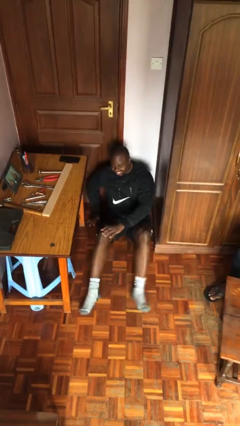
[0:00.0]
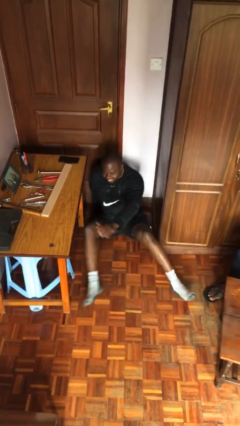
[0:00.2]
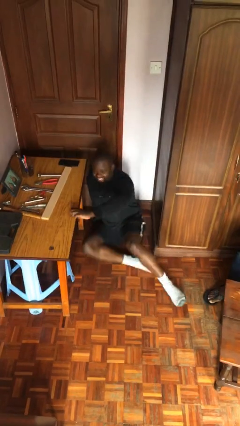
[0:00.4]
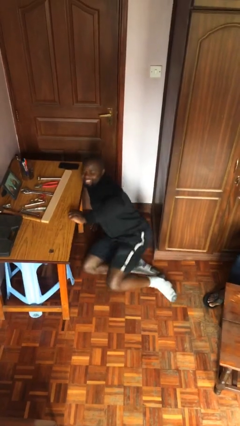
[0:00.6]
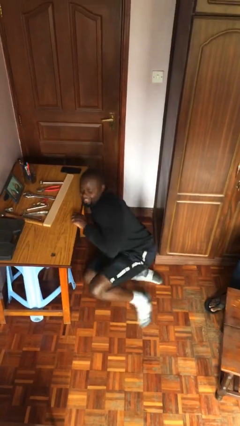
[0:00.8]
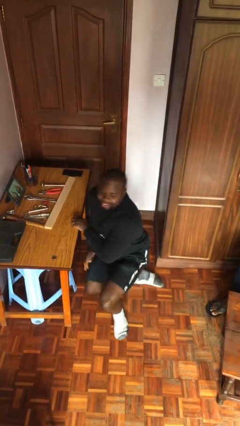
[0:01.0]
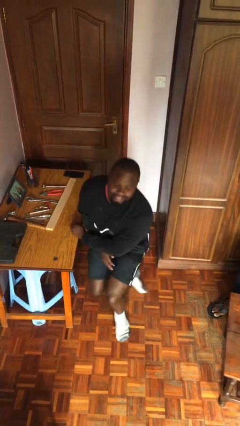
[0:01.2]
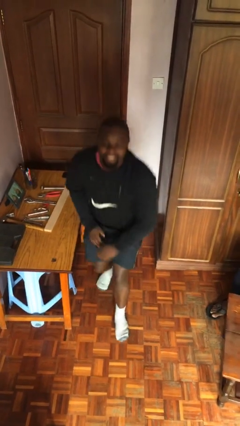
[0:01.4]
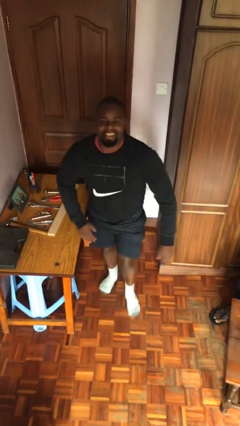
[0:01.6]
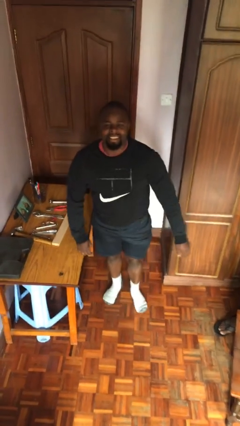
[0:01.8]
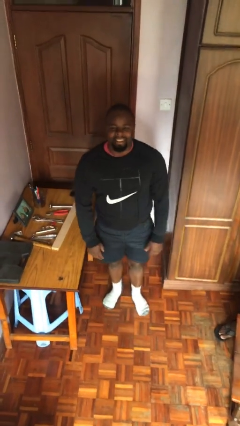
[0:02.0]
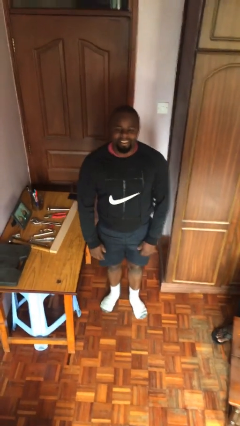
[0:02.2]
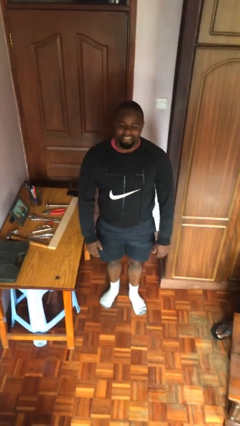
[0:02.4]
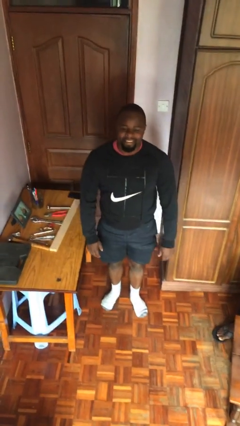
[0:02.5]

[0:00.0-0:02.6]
person stands up

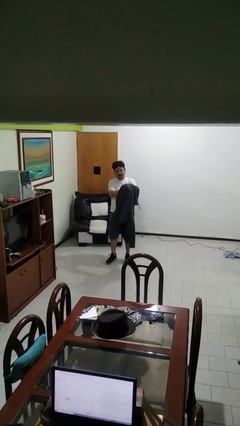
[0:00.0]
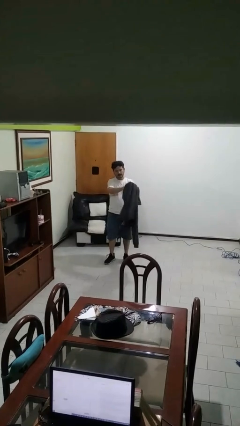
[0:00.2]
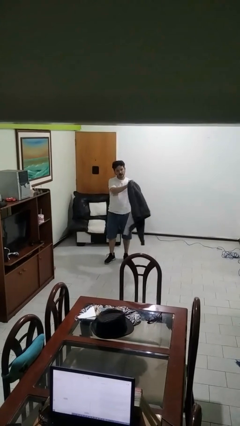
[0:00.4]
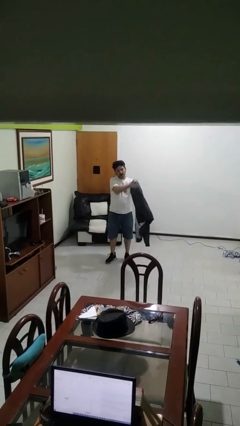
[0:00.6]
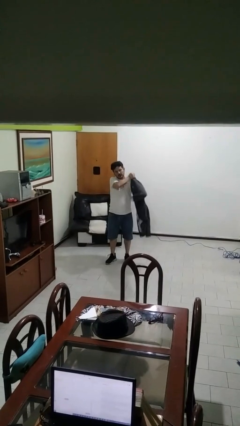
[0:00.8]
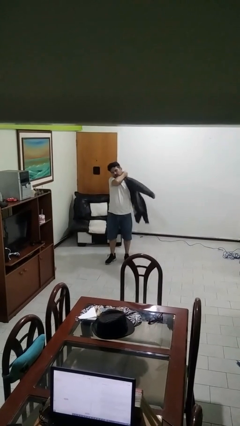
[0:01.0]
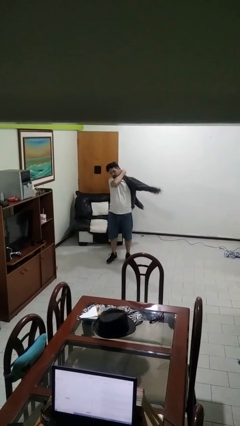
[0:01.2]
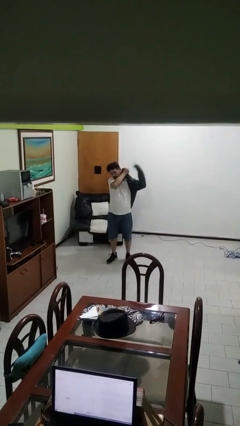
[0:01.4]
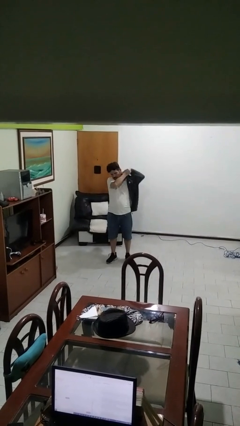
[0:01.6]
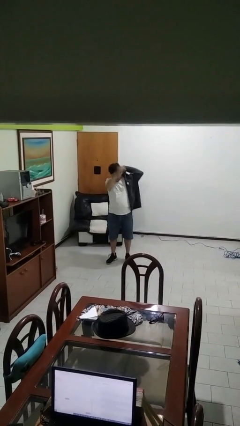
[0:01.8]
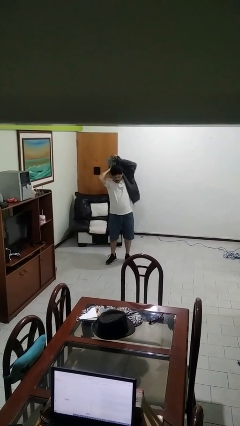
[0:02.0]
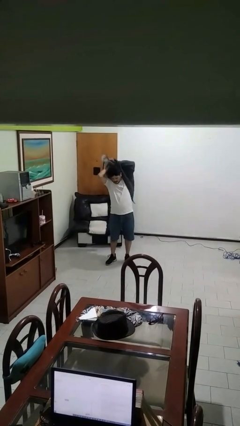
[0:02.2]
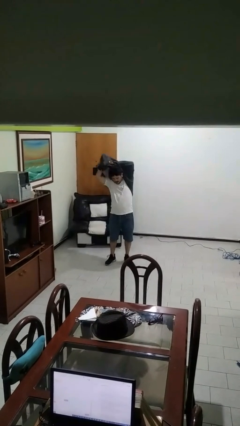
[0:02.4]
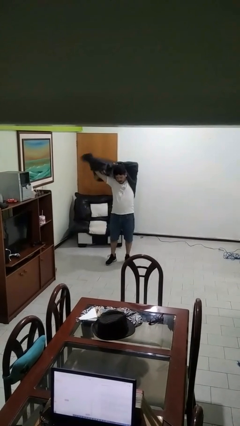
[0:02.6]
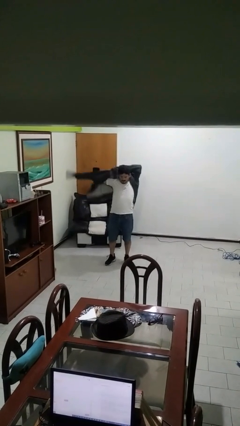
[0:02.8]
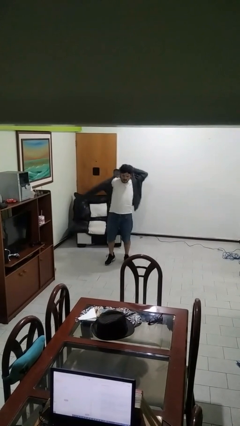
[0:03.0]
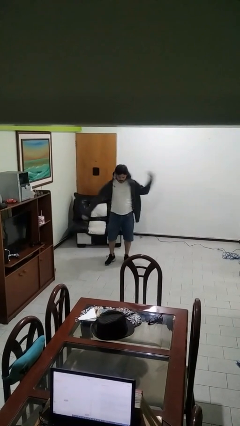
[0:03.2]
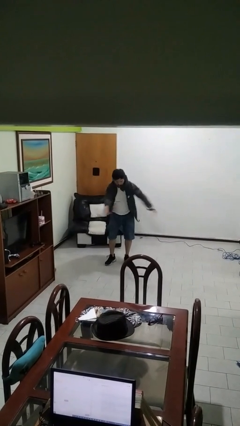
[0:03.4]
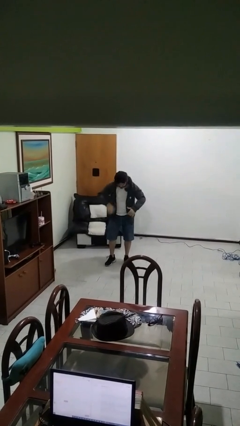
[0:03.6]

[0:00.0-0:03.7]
person puts on jacket

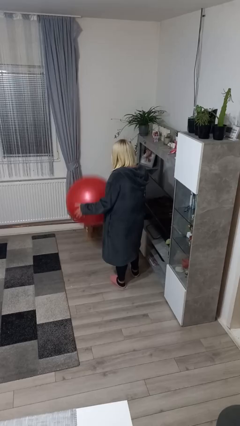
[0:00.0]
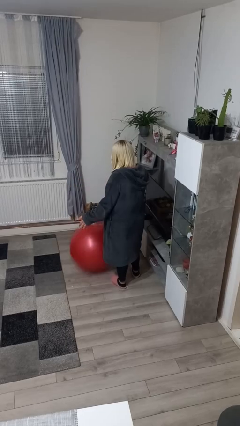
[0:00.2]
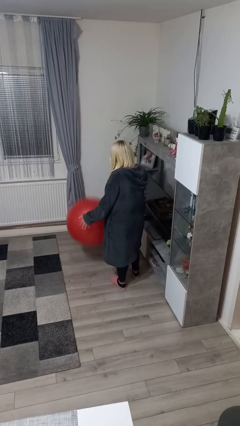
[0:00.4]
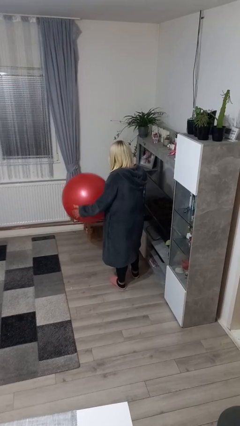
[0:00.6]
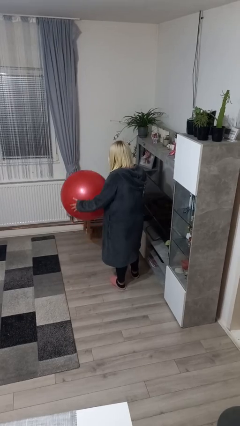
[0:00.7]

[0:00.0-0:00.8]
person bounces ball on floor

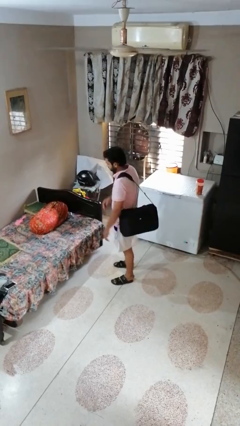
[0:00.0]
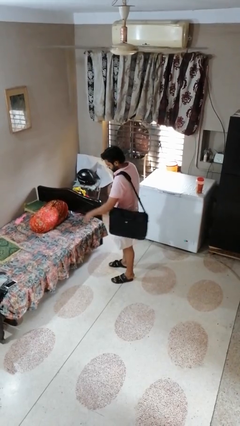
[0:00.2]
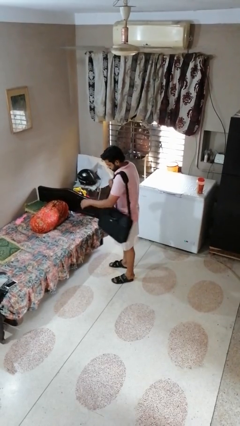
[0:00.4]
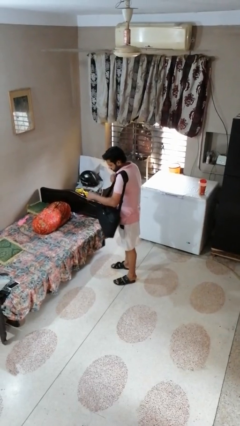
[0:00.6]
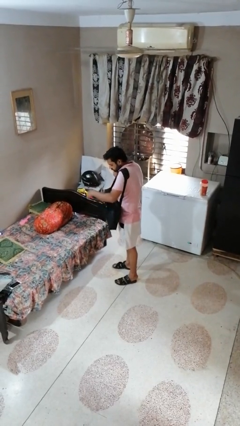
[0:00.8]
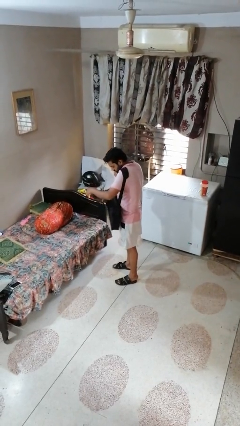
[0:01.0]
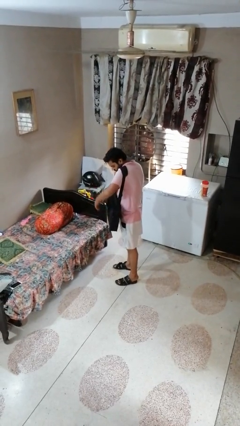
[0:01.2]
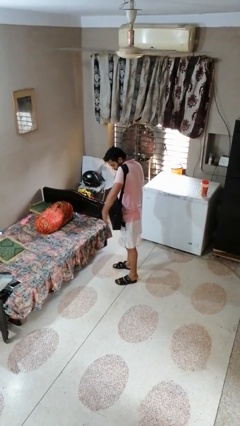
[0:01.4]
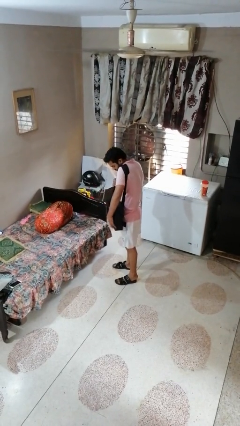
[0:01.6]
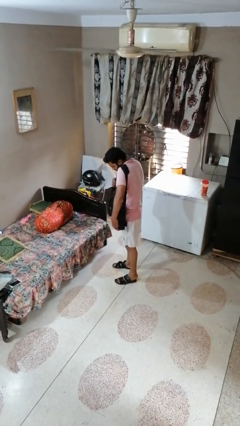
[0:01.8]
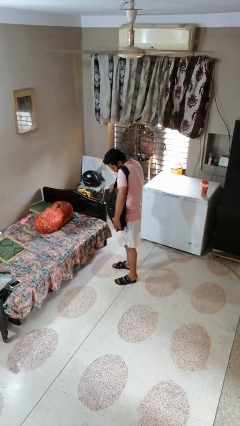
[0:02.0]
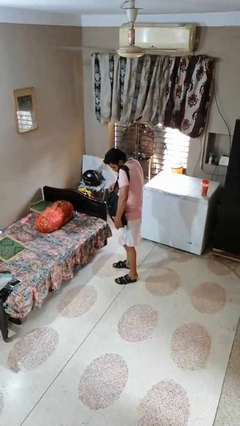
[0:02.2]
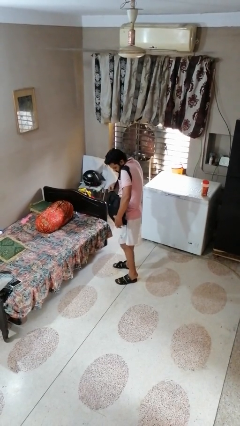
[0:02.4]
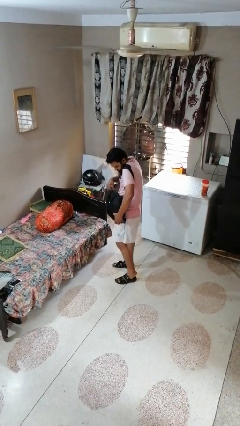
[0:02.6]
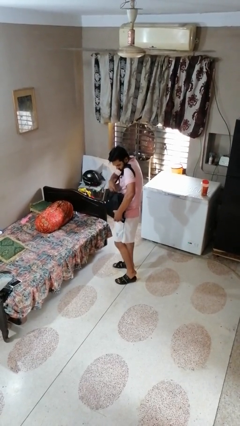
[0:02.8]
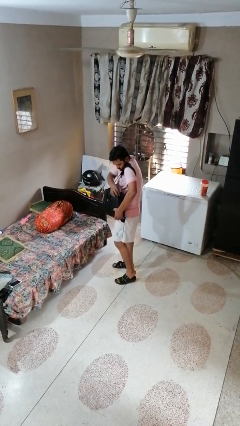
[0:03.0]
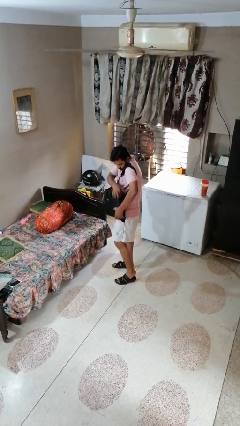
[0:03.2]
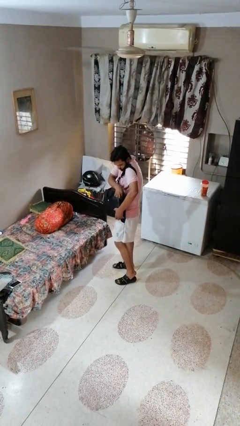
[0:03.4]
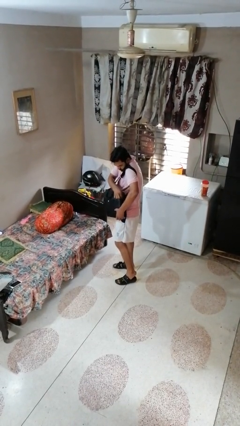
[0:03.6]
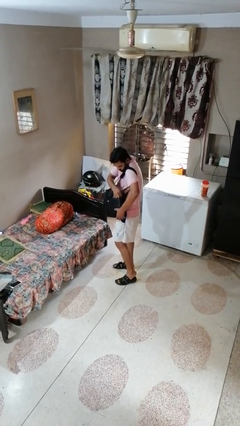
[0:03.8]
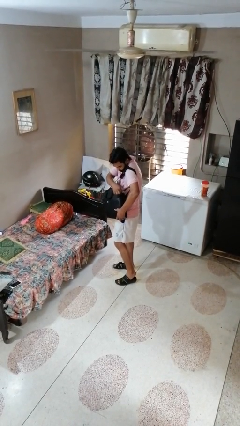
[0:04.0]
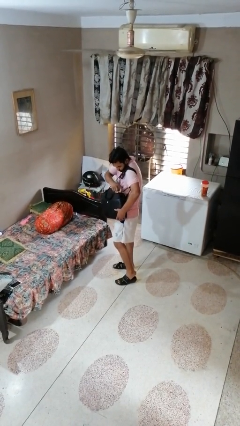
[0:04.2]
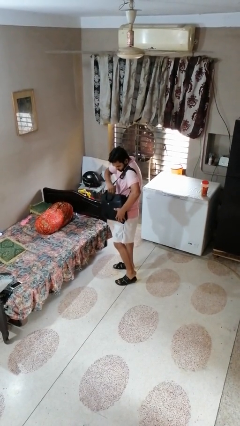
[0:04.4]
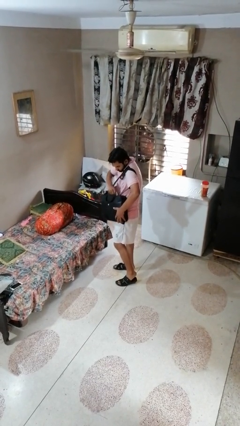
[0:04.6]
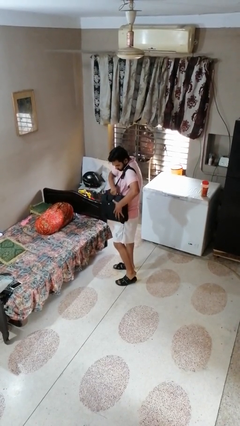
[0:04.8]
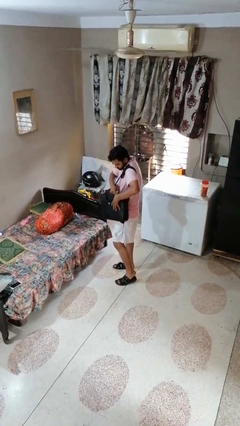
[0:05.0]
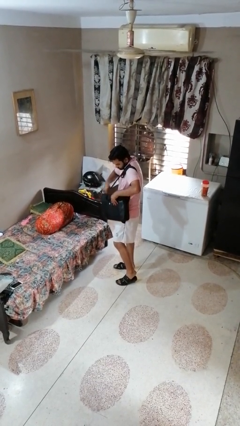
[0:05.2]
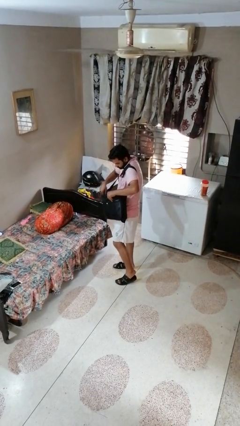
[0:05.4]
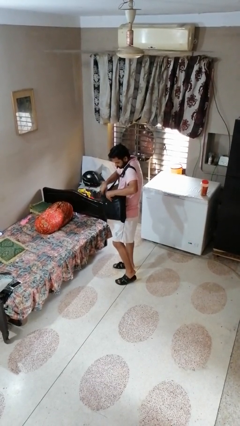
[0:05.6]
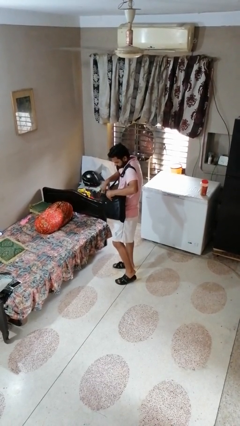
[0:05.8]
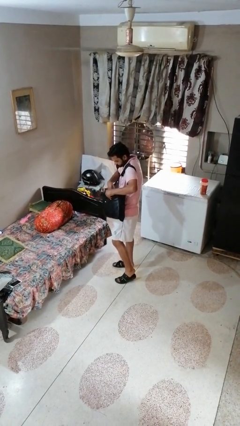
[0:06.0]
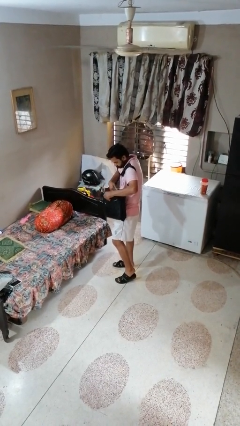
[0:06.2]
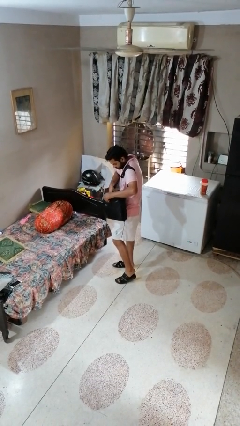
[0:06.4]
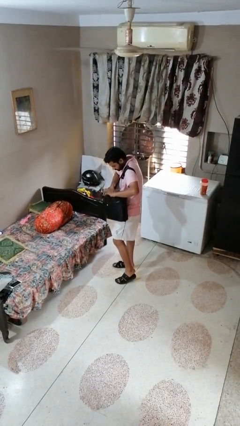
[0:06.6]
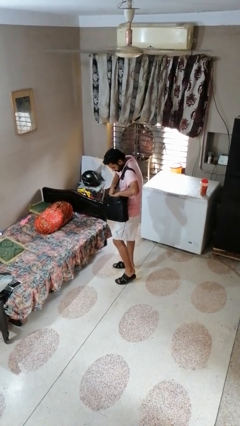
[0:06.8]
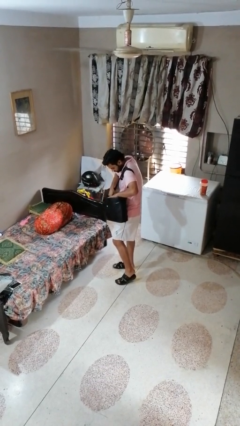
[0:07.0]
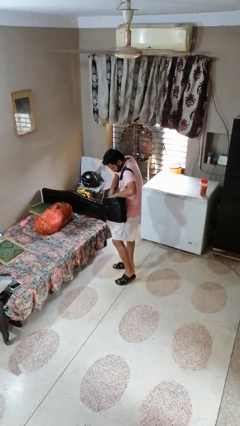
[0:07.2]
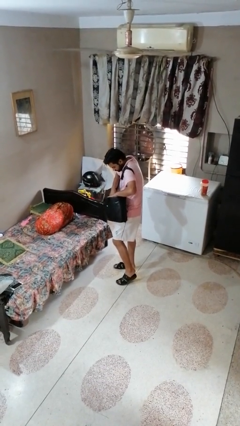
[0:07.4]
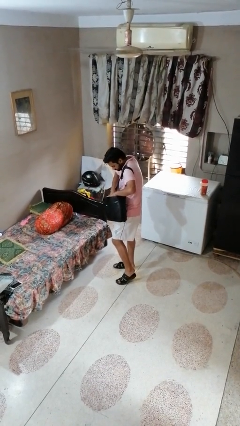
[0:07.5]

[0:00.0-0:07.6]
person searches in backpack

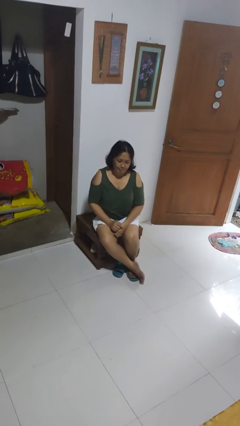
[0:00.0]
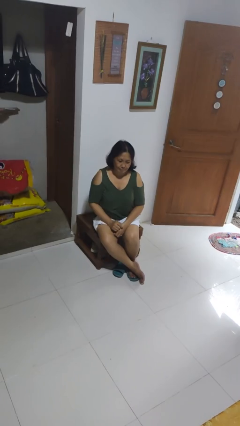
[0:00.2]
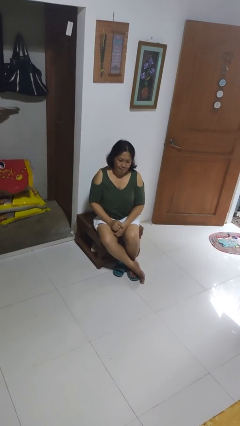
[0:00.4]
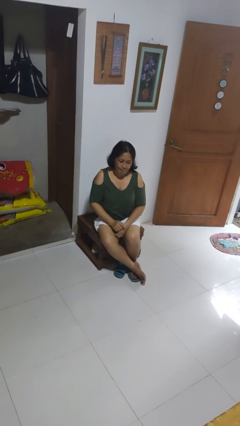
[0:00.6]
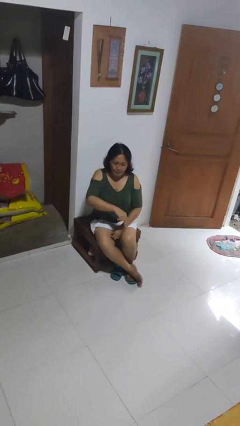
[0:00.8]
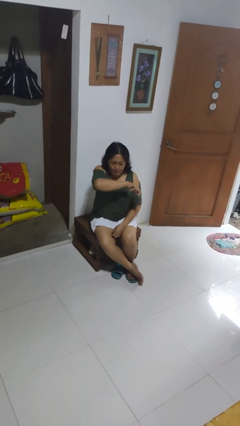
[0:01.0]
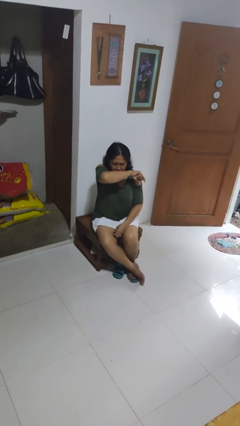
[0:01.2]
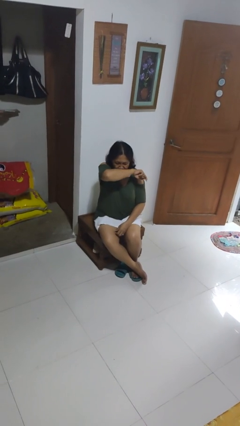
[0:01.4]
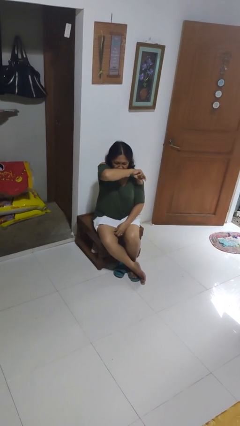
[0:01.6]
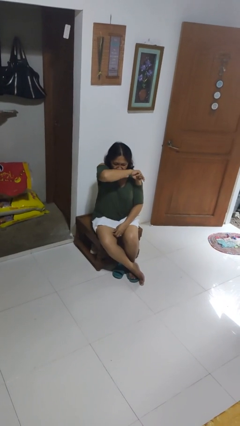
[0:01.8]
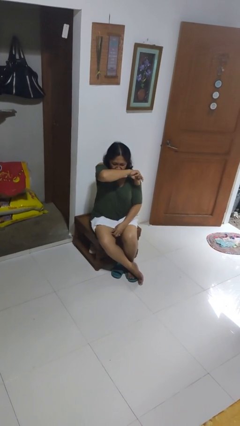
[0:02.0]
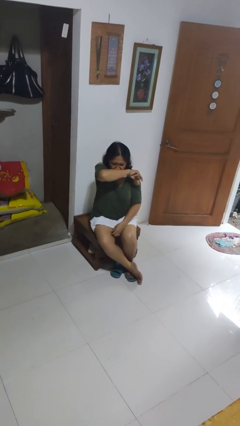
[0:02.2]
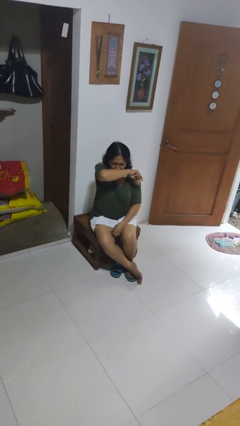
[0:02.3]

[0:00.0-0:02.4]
person sneezes into arm

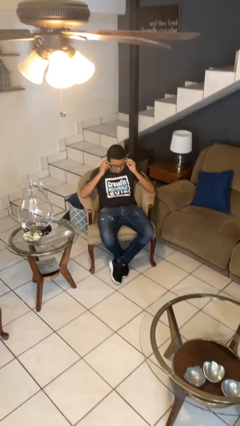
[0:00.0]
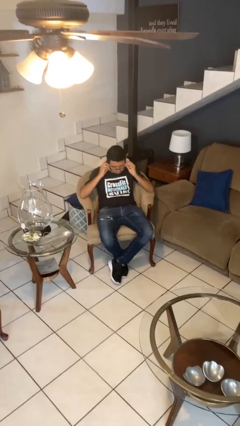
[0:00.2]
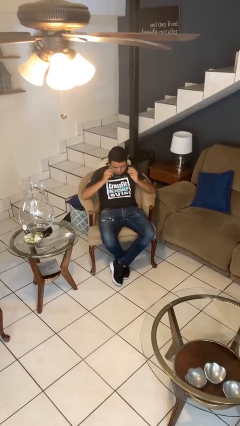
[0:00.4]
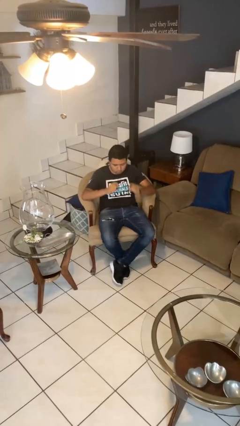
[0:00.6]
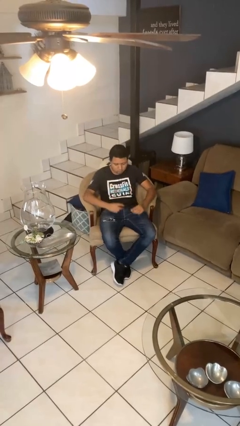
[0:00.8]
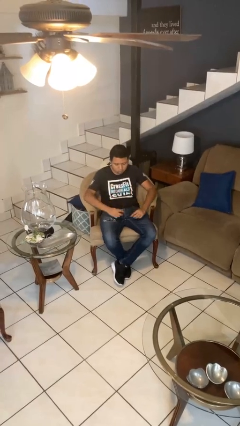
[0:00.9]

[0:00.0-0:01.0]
person takes off glasses
